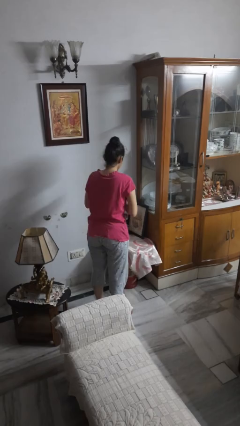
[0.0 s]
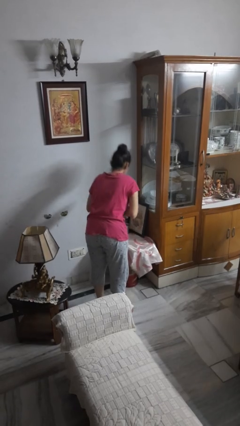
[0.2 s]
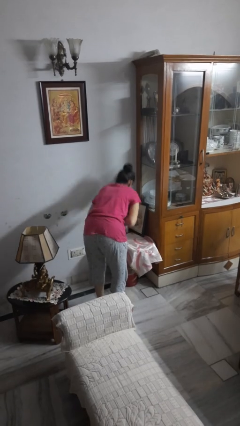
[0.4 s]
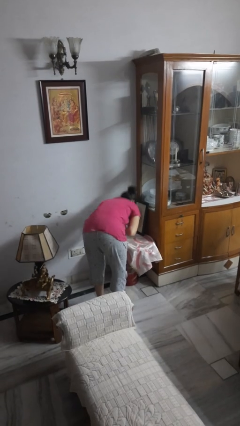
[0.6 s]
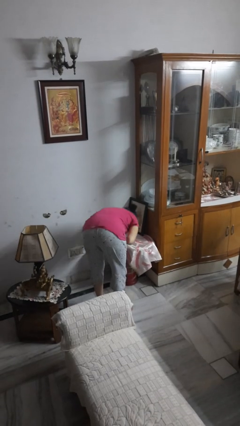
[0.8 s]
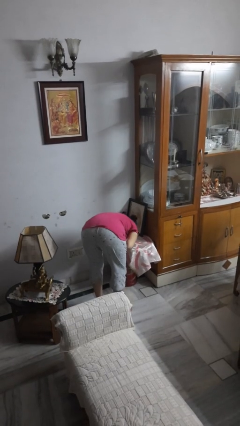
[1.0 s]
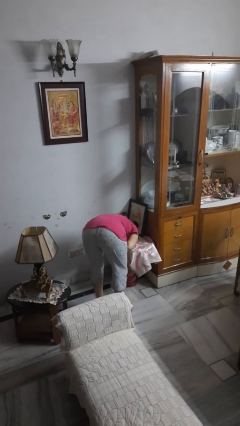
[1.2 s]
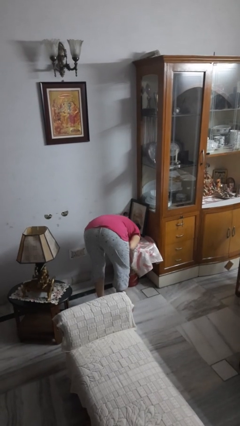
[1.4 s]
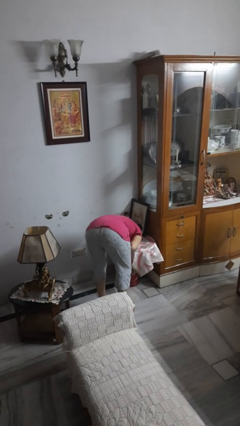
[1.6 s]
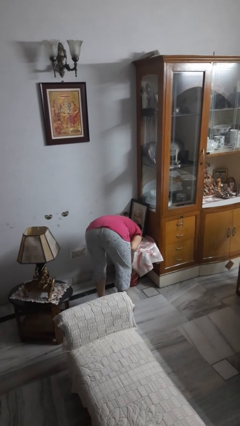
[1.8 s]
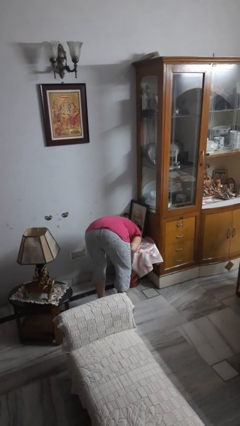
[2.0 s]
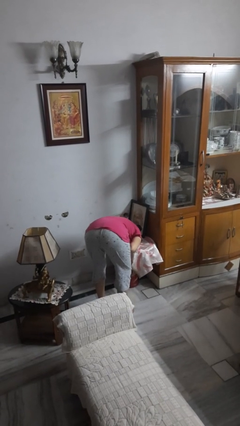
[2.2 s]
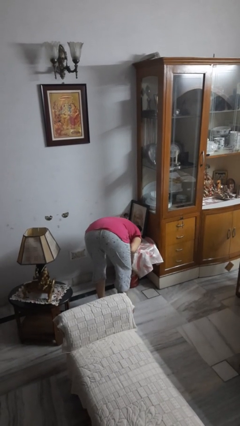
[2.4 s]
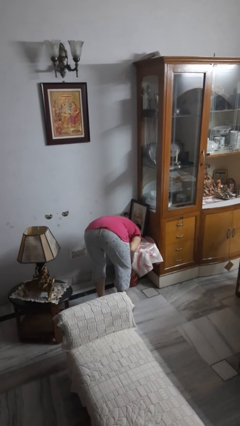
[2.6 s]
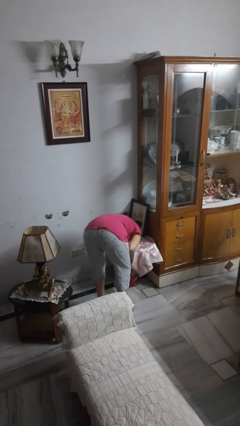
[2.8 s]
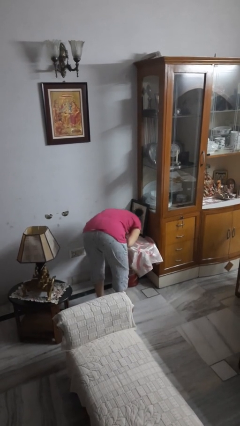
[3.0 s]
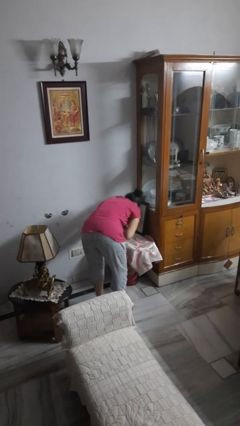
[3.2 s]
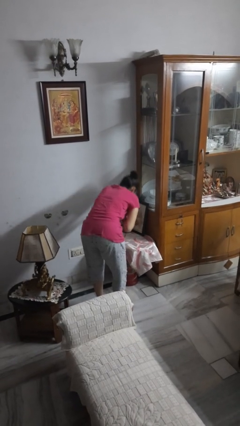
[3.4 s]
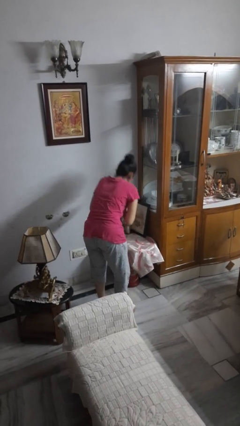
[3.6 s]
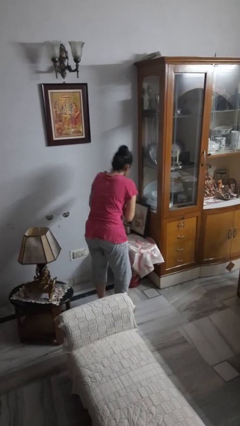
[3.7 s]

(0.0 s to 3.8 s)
person prays

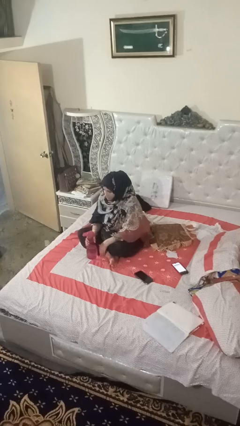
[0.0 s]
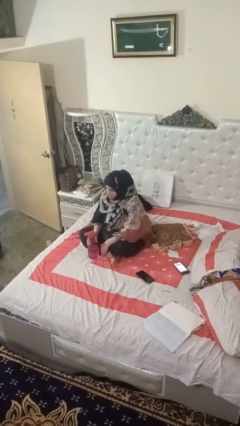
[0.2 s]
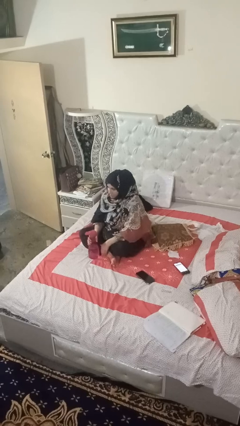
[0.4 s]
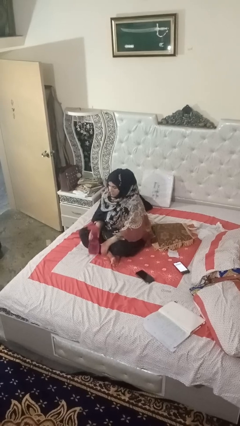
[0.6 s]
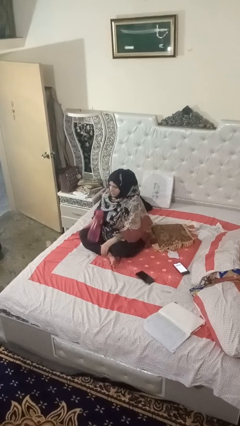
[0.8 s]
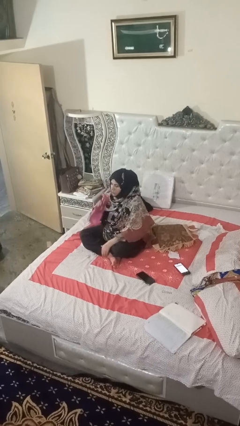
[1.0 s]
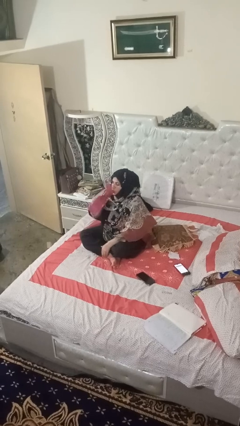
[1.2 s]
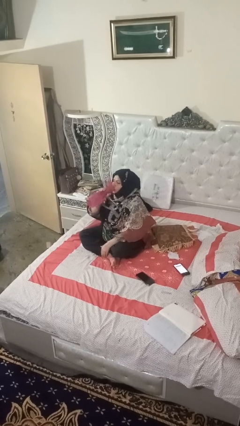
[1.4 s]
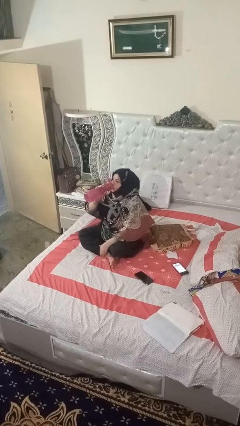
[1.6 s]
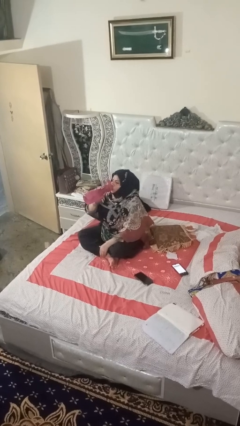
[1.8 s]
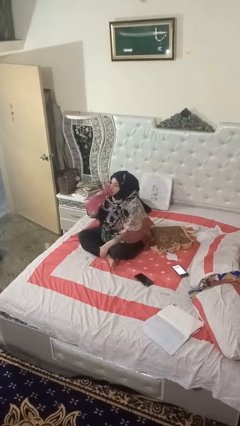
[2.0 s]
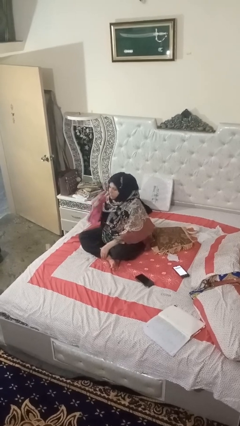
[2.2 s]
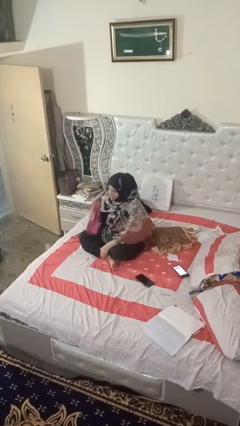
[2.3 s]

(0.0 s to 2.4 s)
person drinks from bottle

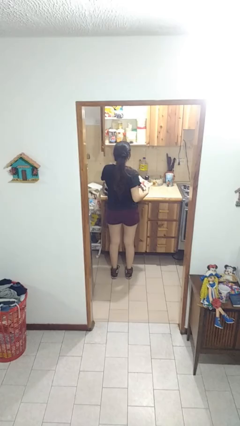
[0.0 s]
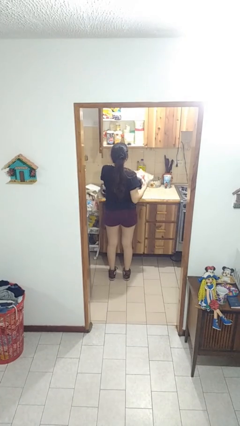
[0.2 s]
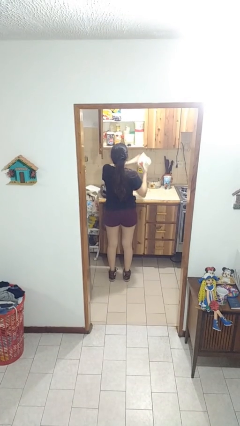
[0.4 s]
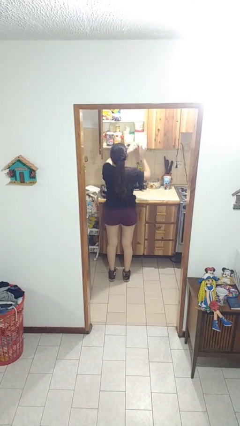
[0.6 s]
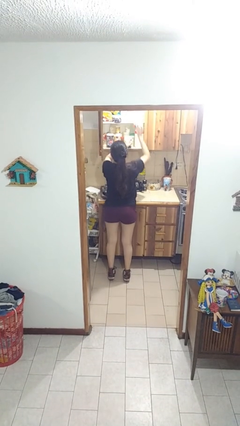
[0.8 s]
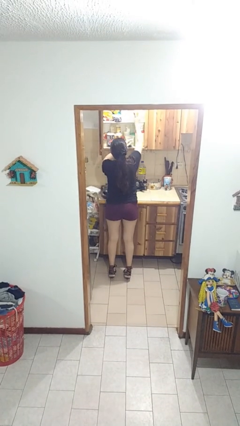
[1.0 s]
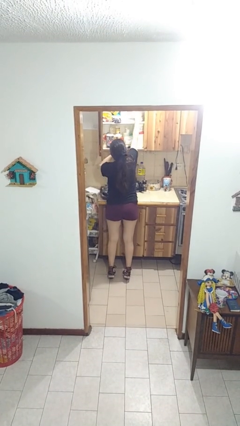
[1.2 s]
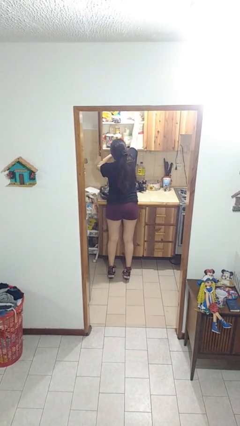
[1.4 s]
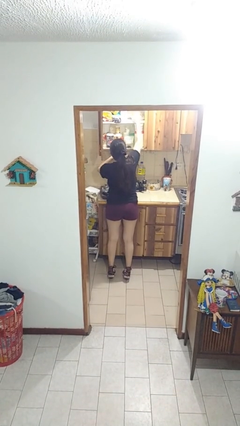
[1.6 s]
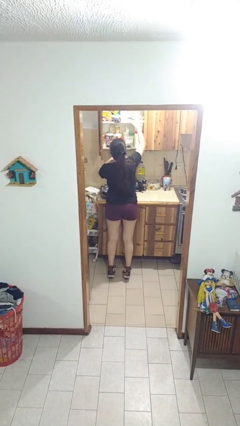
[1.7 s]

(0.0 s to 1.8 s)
person puts object in cabinet

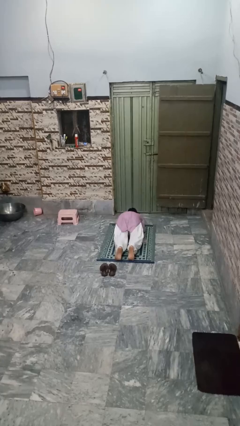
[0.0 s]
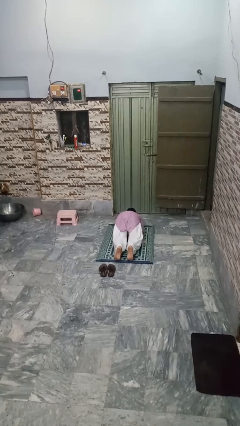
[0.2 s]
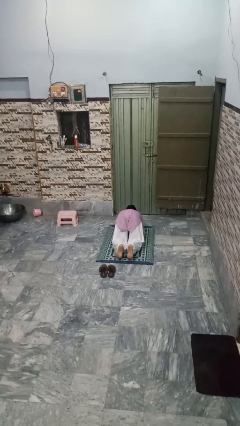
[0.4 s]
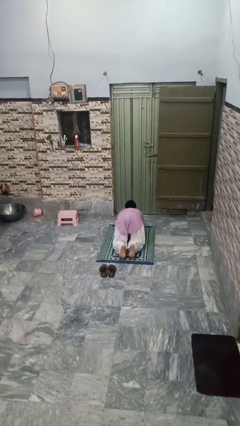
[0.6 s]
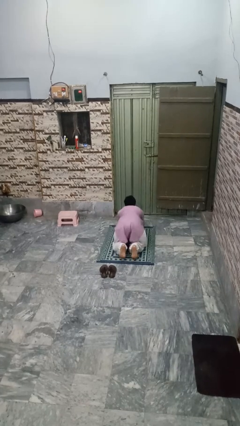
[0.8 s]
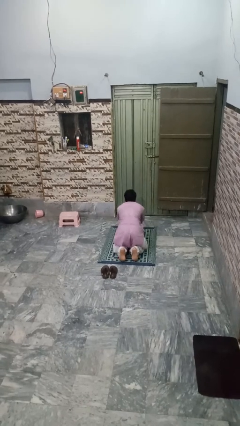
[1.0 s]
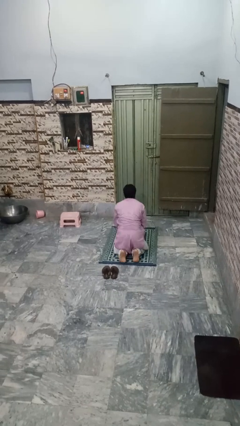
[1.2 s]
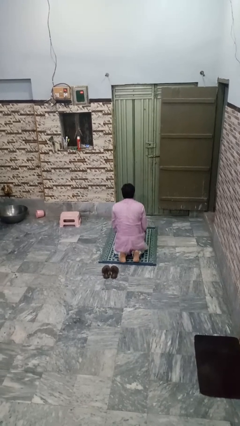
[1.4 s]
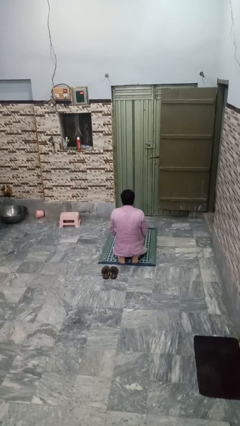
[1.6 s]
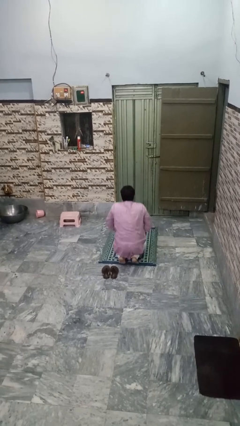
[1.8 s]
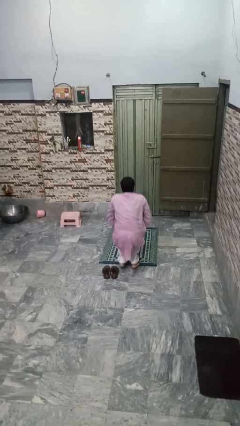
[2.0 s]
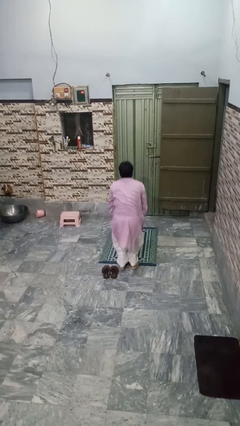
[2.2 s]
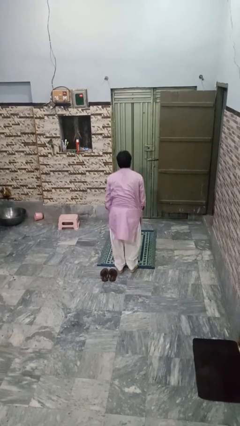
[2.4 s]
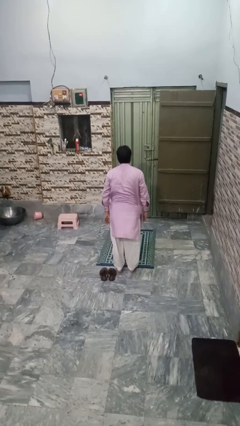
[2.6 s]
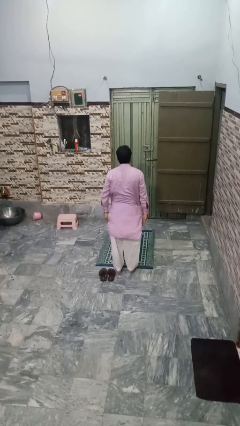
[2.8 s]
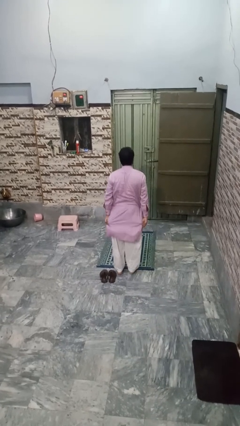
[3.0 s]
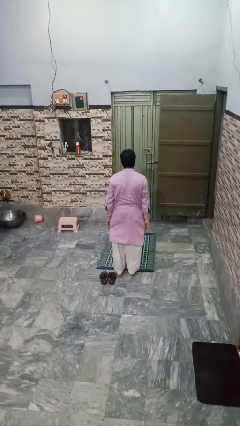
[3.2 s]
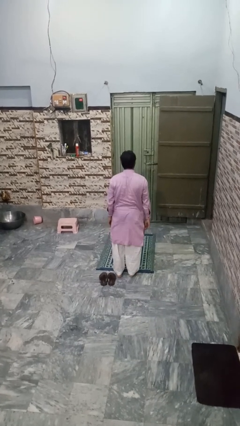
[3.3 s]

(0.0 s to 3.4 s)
person stands up from floor

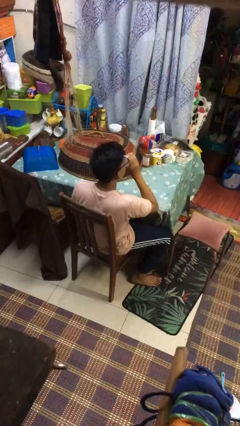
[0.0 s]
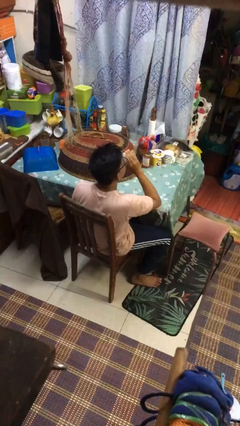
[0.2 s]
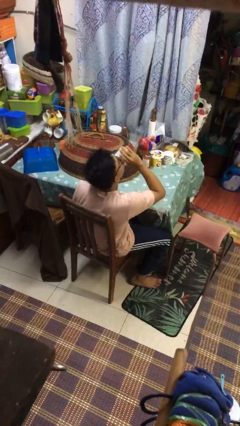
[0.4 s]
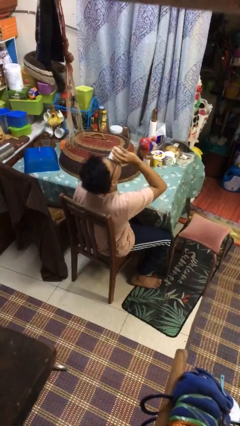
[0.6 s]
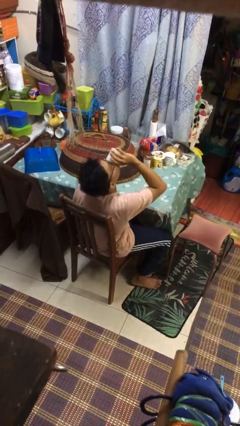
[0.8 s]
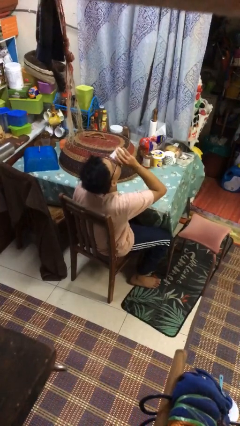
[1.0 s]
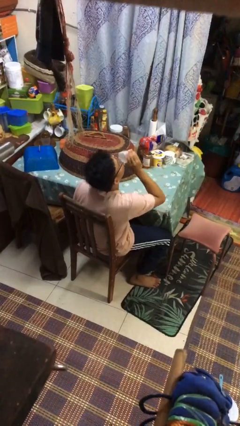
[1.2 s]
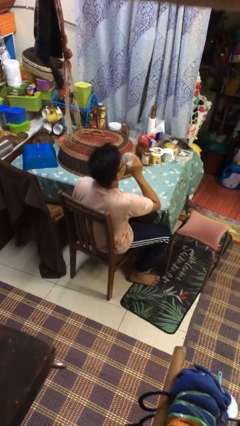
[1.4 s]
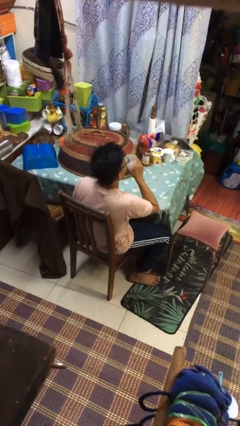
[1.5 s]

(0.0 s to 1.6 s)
person drinks from shotglass

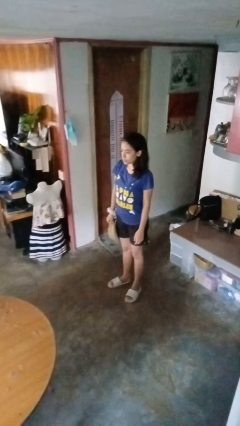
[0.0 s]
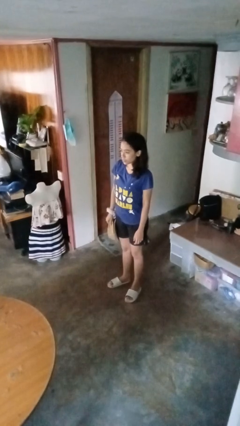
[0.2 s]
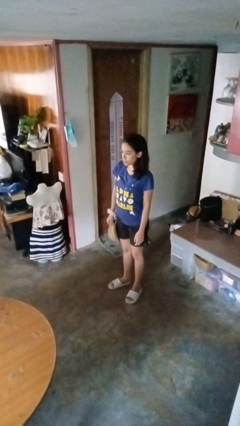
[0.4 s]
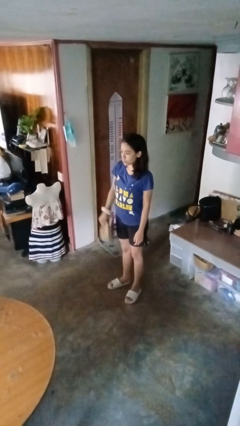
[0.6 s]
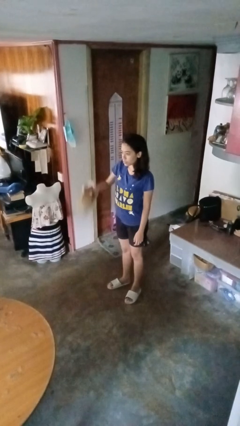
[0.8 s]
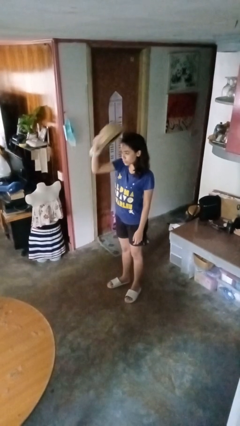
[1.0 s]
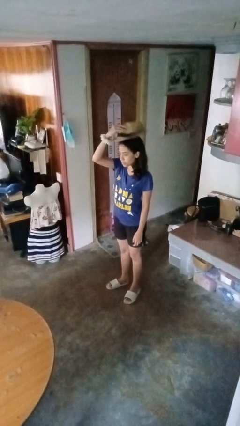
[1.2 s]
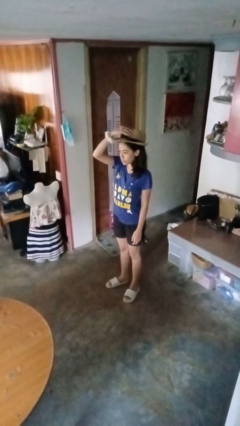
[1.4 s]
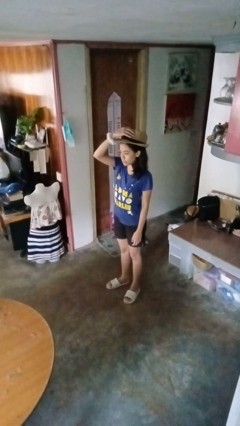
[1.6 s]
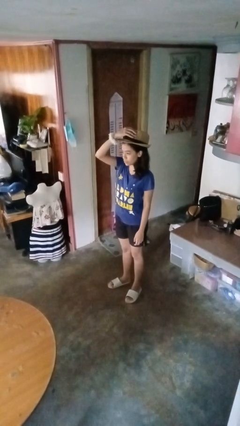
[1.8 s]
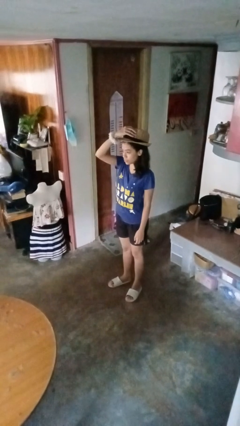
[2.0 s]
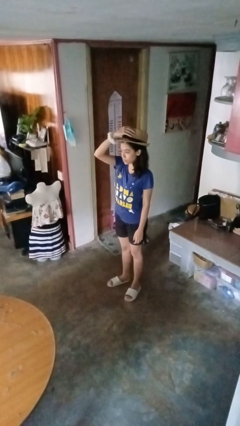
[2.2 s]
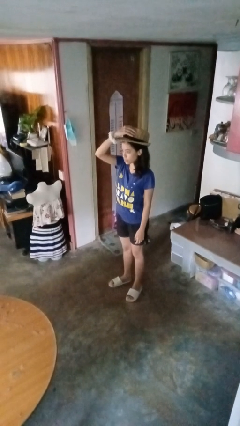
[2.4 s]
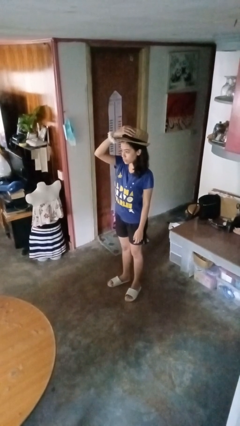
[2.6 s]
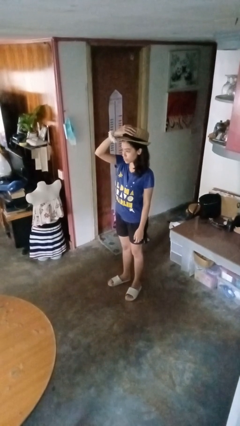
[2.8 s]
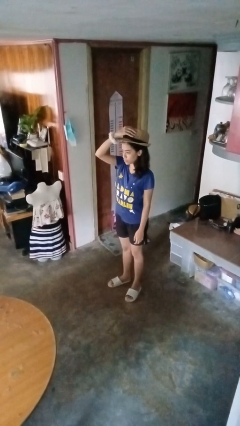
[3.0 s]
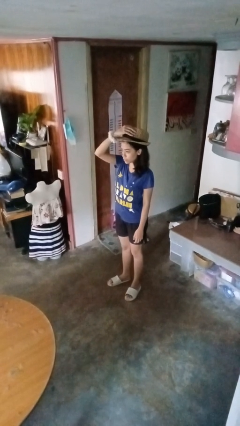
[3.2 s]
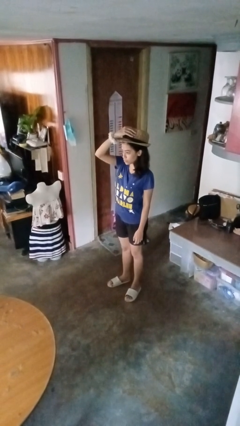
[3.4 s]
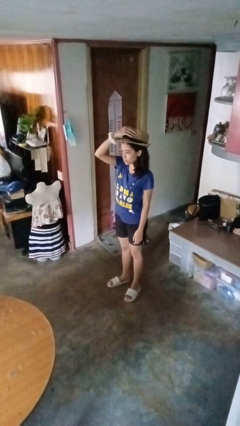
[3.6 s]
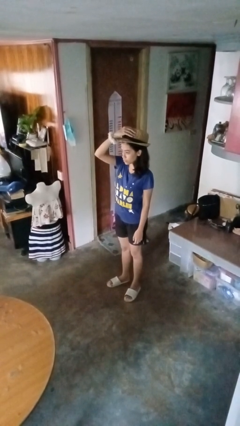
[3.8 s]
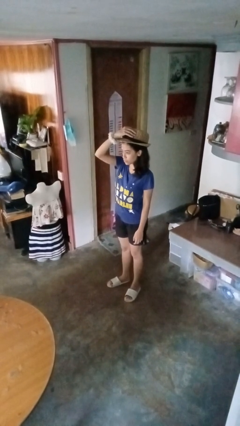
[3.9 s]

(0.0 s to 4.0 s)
person puts on hat

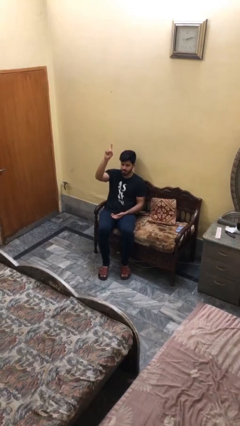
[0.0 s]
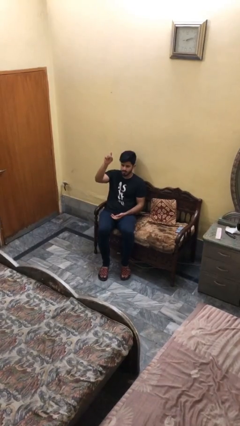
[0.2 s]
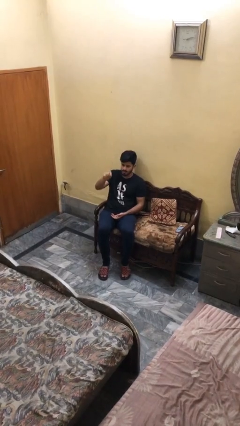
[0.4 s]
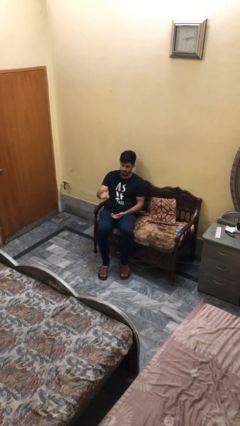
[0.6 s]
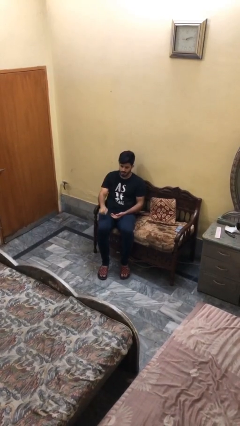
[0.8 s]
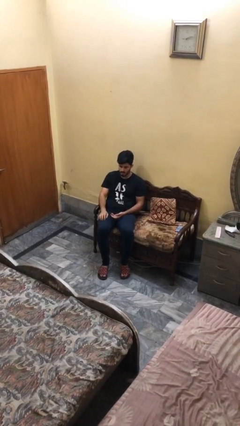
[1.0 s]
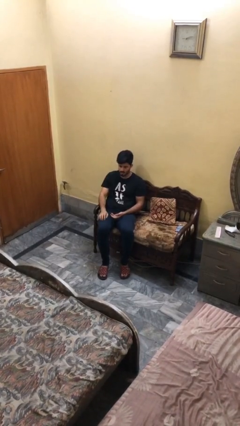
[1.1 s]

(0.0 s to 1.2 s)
person gestures lower hand
